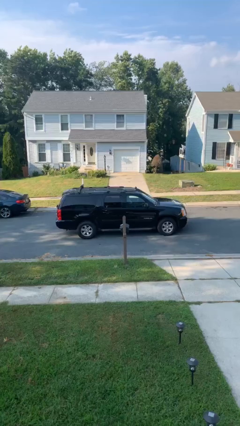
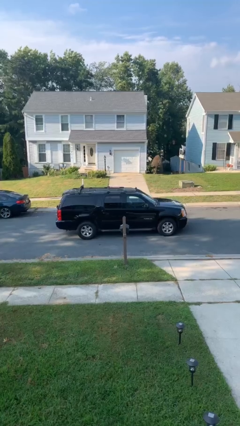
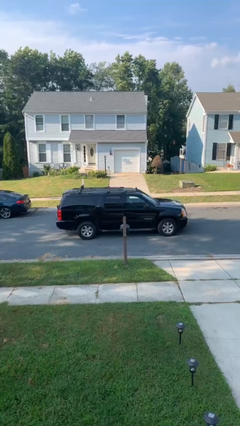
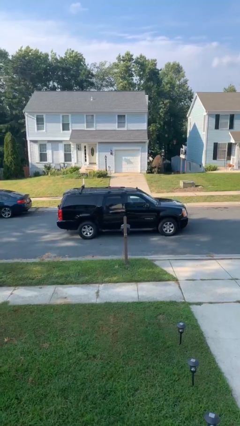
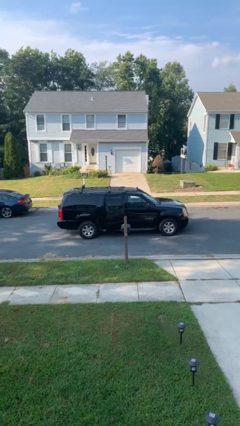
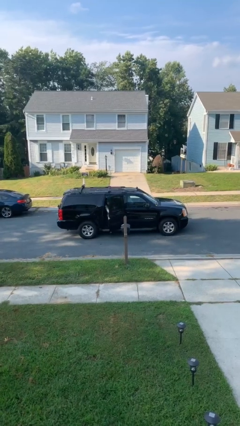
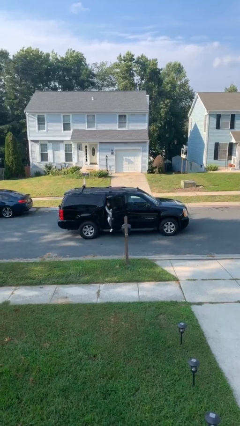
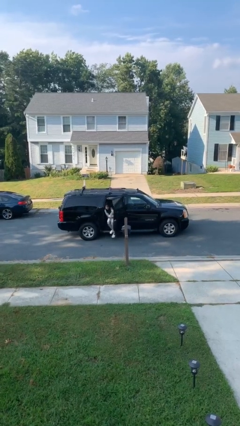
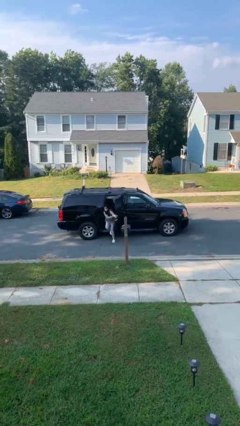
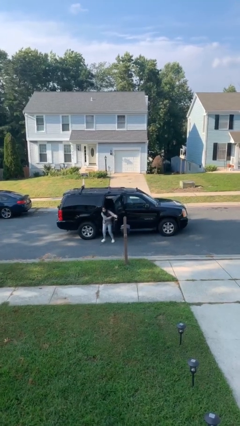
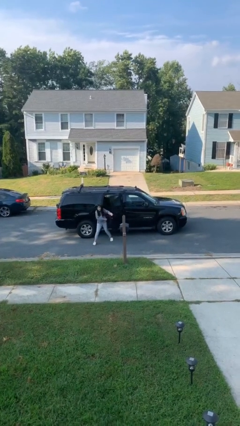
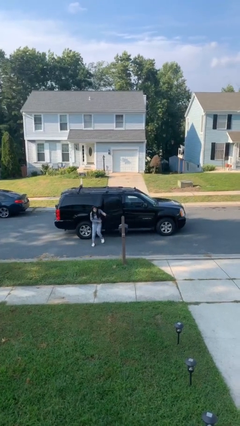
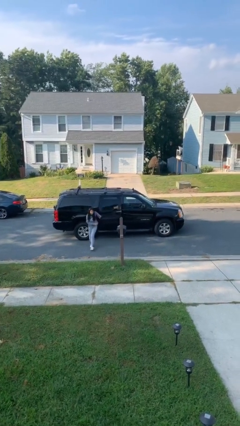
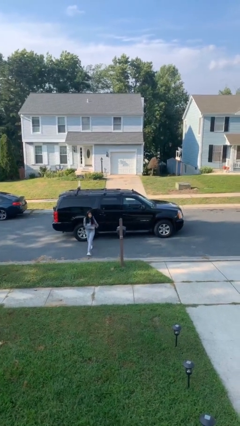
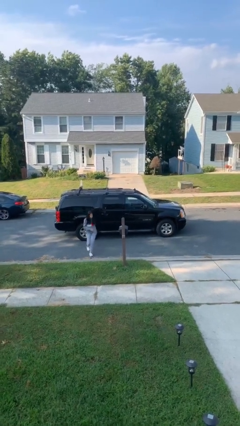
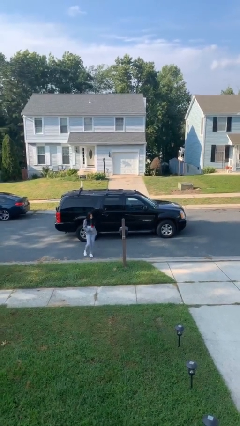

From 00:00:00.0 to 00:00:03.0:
car drops off person

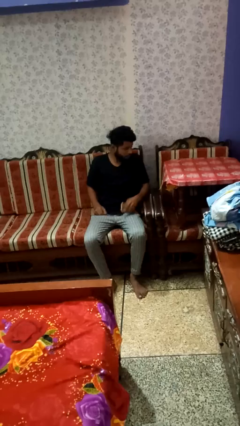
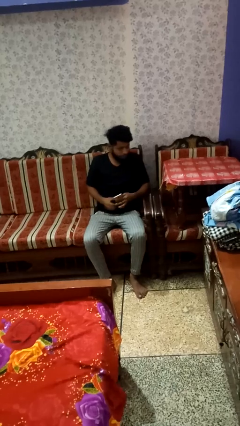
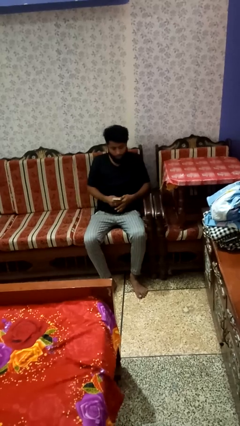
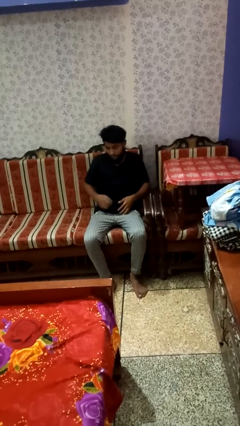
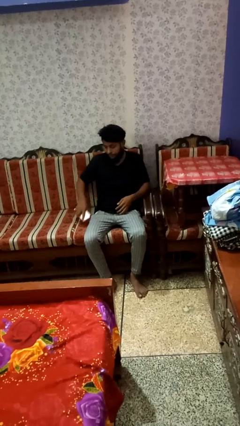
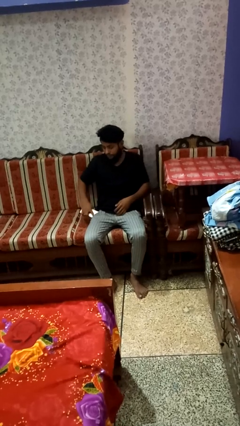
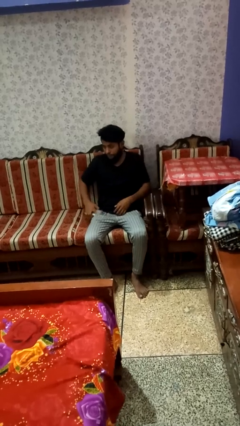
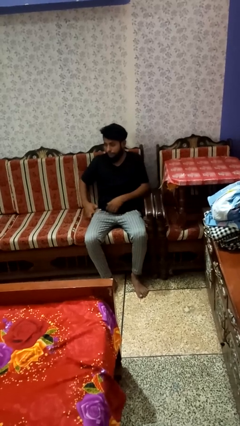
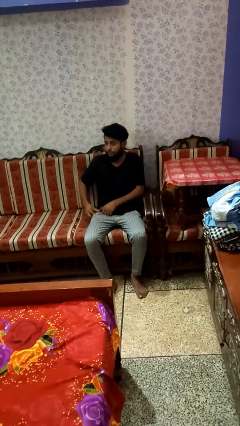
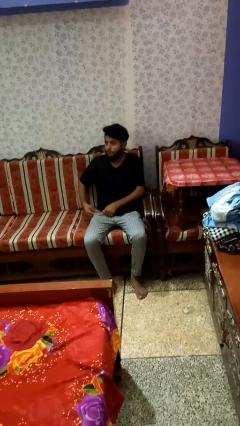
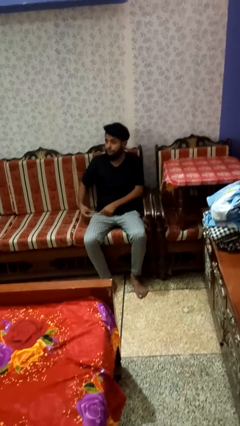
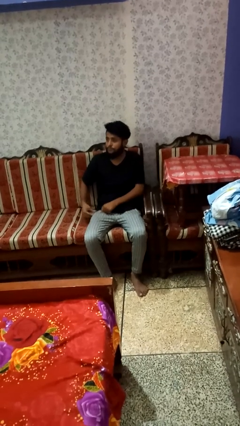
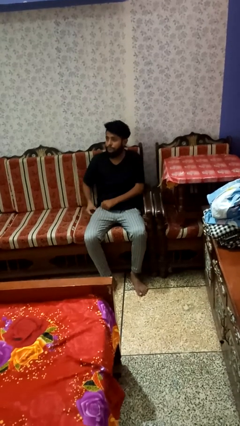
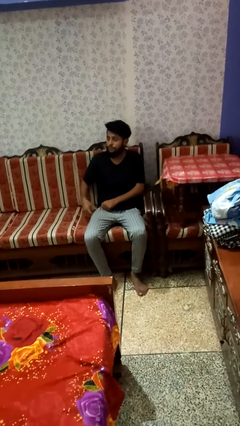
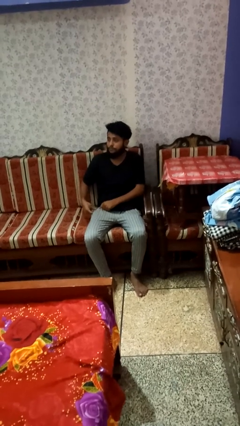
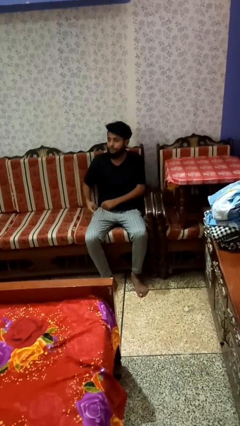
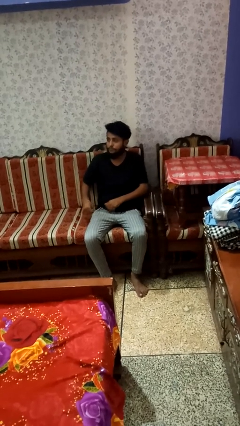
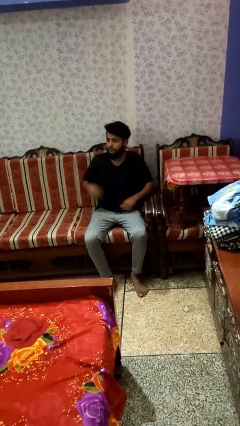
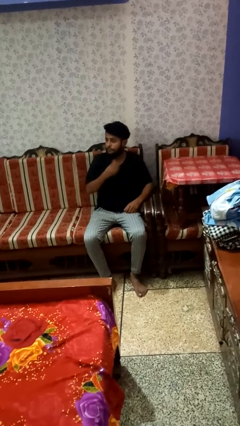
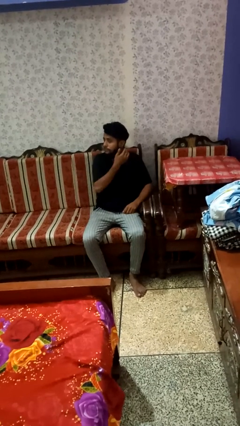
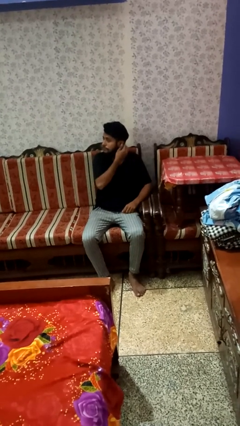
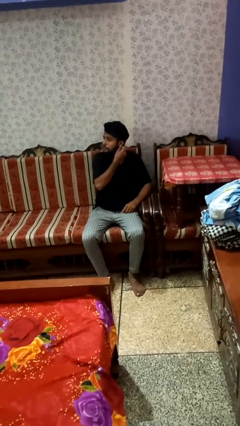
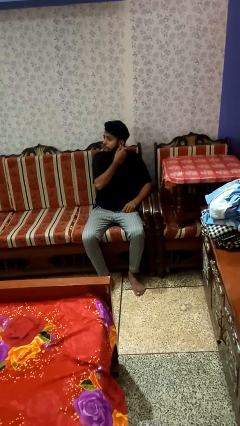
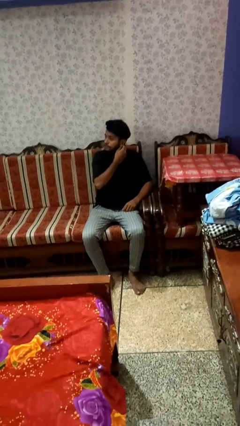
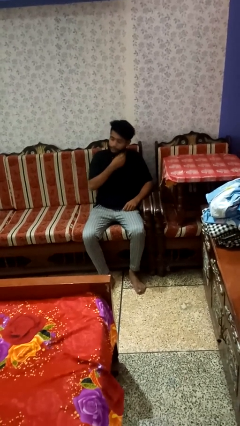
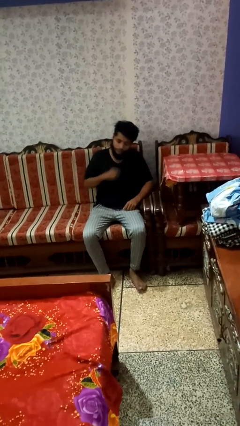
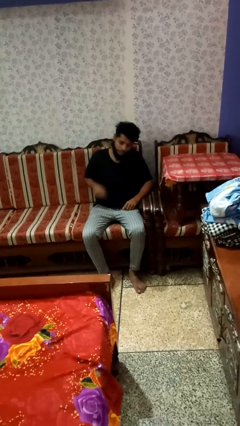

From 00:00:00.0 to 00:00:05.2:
person puts phone into pocket

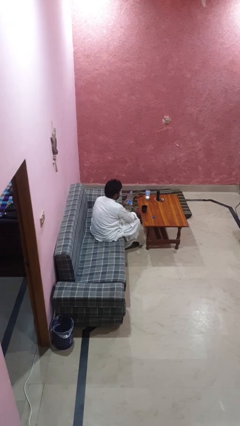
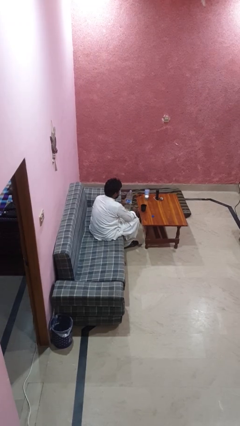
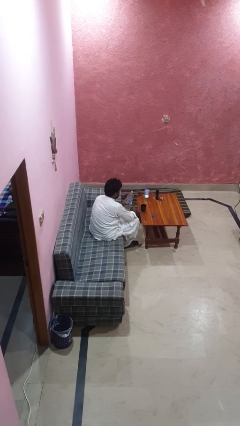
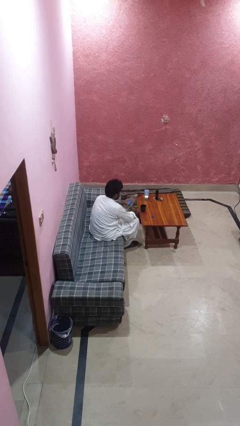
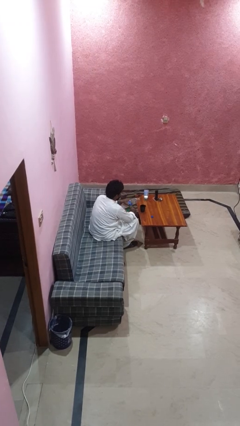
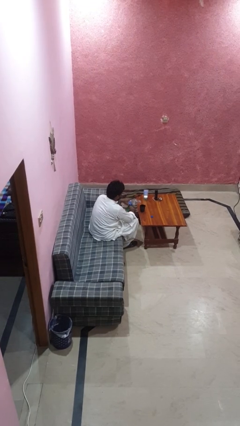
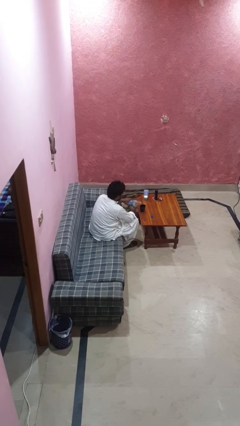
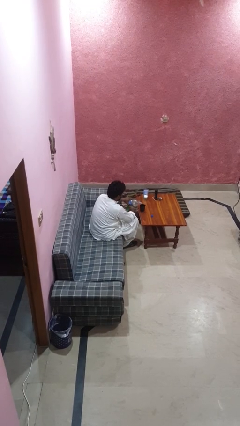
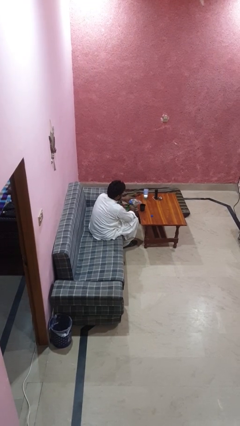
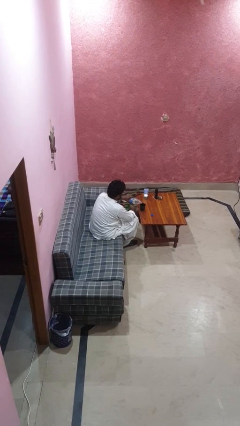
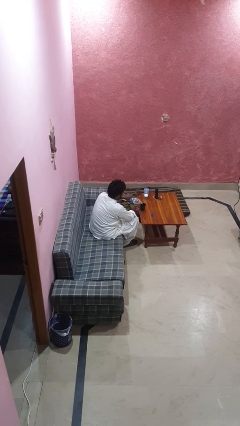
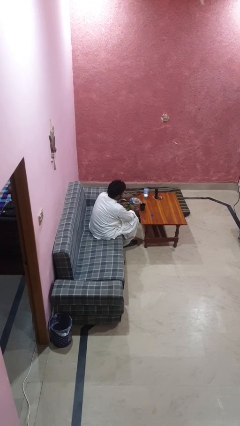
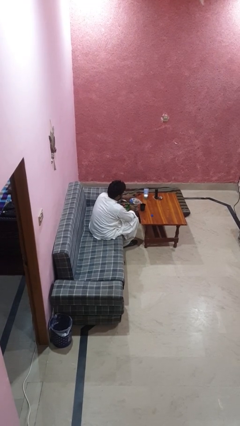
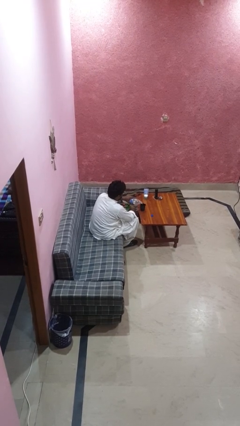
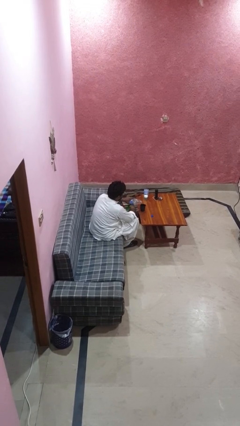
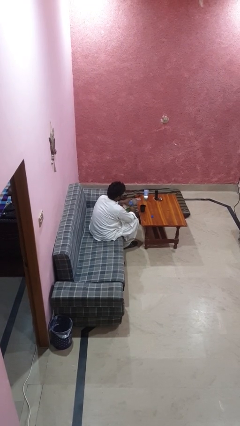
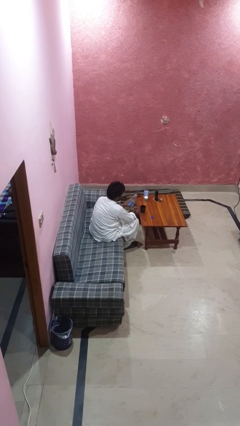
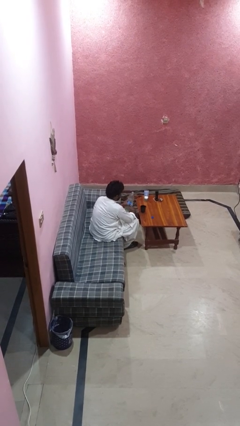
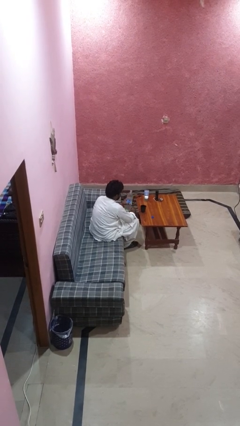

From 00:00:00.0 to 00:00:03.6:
person pours liquid into cup

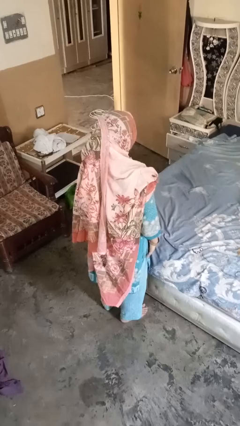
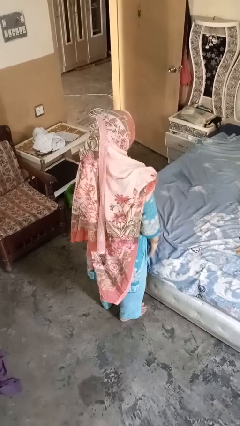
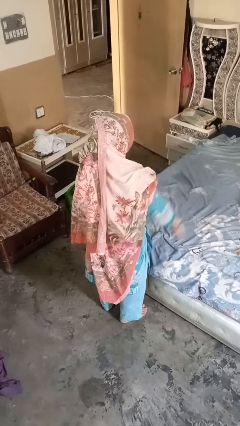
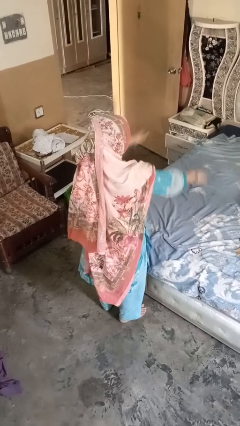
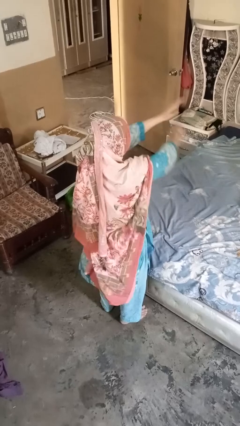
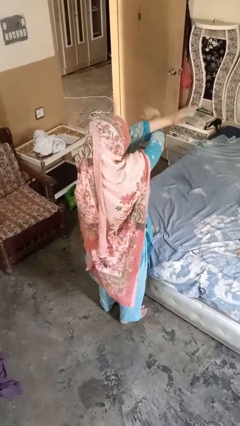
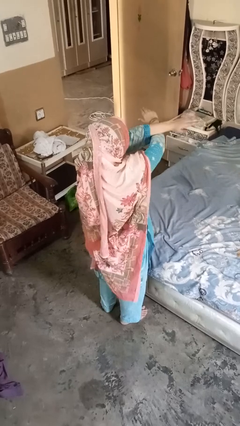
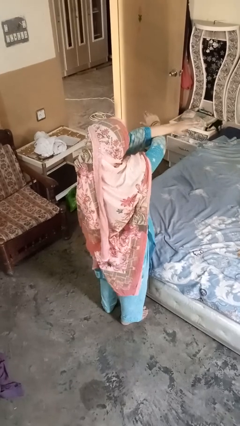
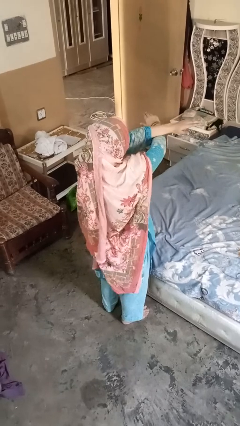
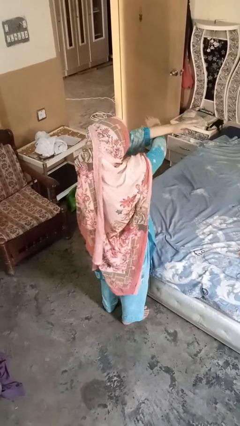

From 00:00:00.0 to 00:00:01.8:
person gestures arms x

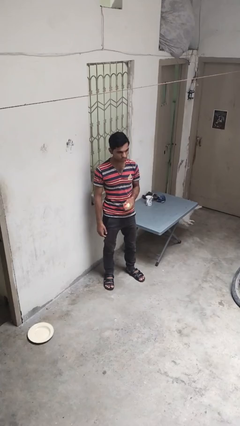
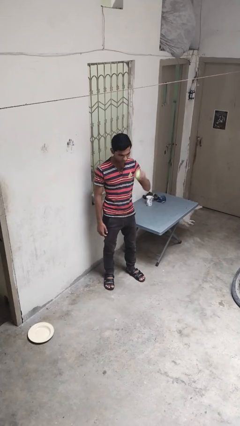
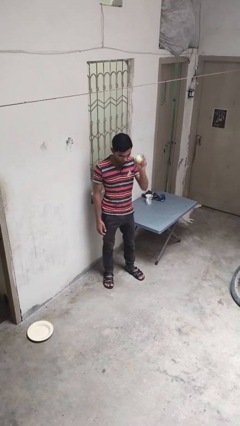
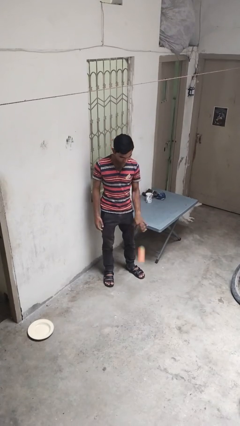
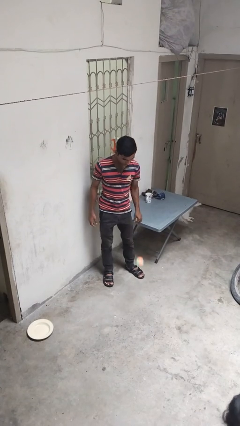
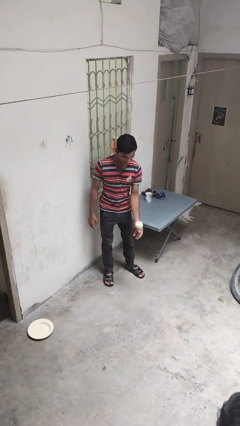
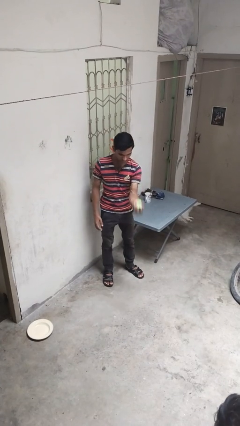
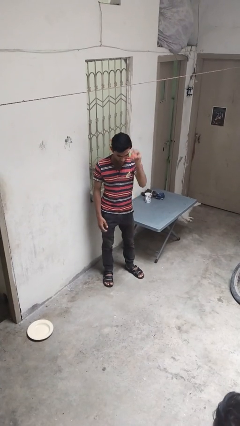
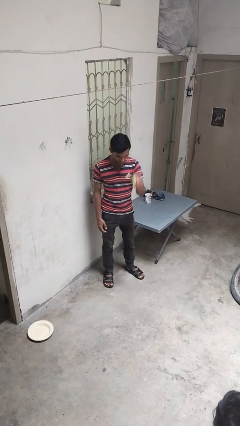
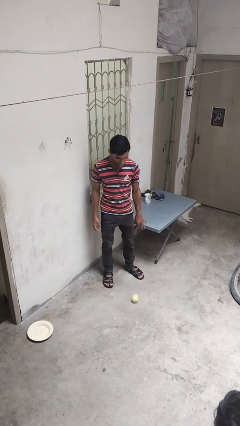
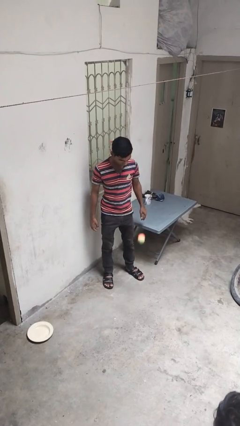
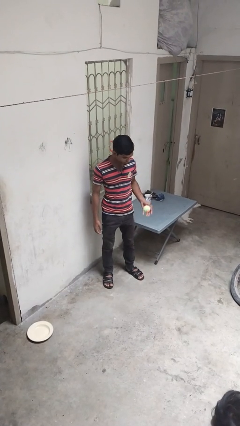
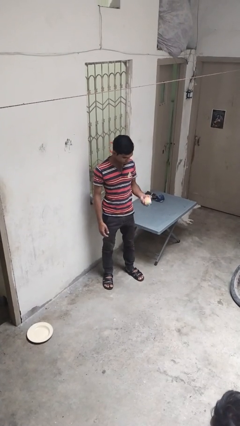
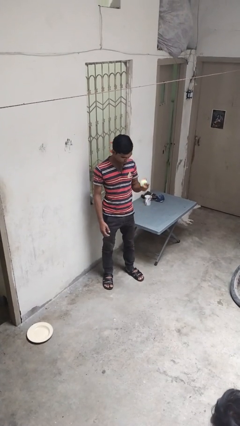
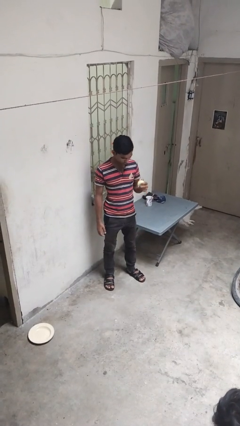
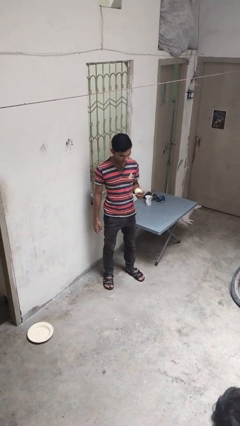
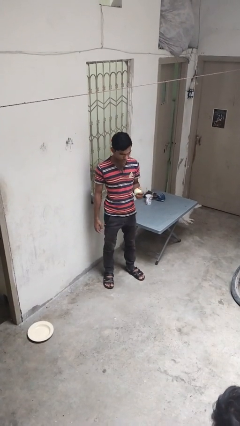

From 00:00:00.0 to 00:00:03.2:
person bounces ball on floor

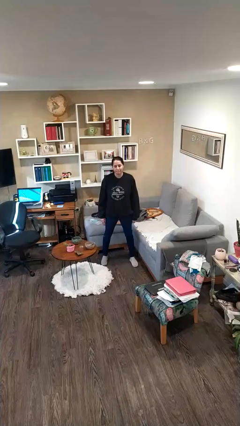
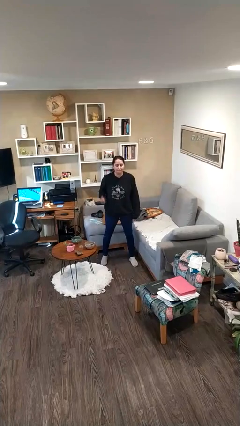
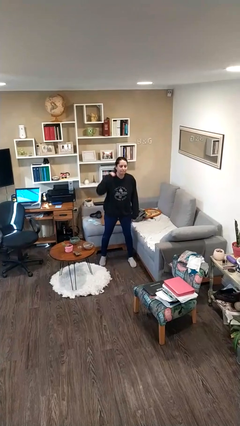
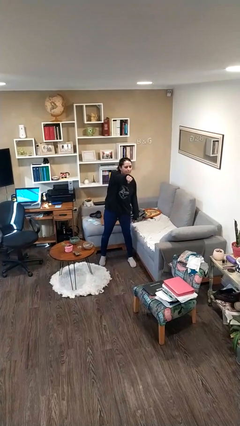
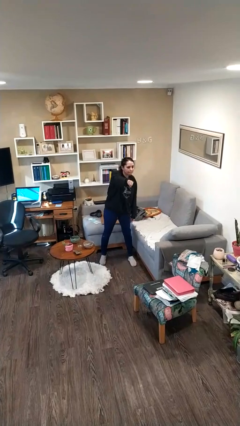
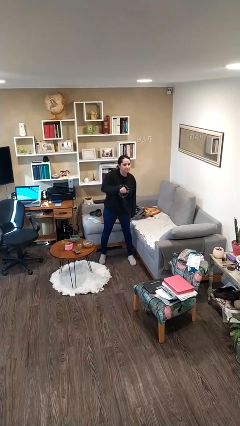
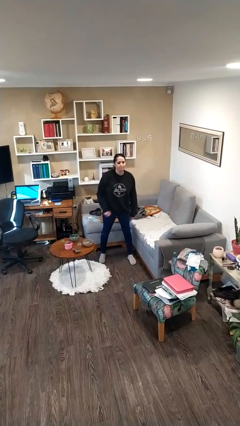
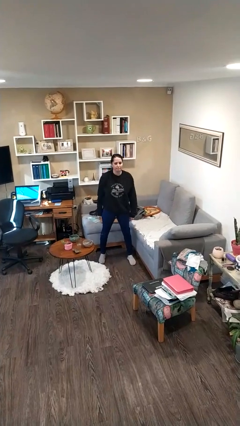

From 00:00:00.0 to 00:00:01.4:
person punches
